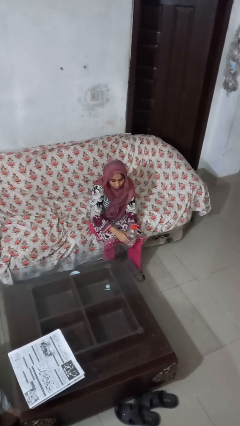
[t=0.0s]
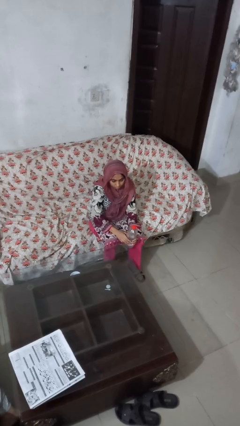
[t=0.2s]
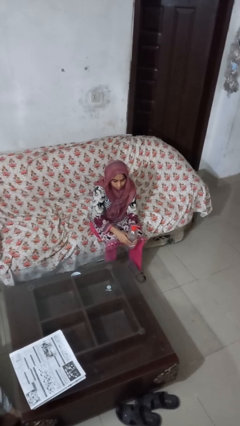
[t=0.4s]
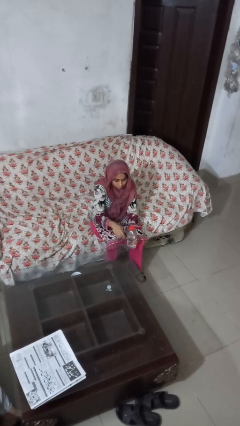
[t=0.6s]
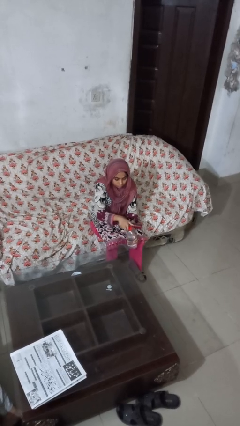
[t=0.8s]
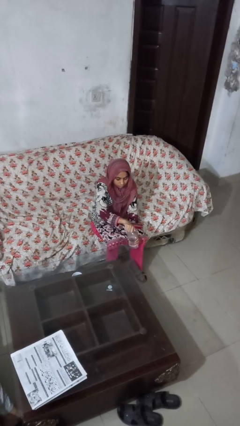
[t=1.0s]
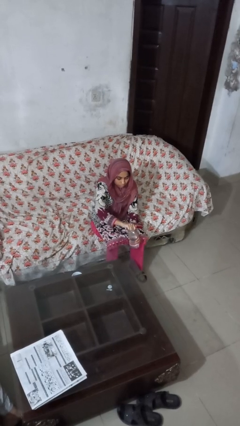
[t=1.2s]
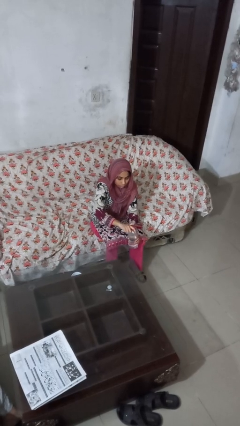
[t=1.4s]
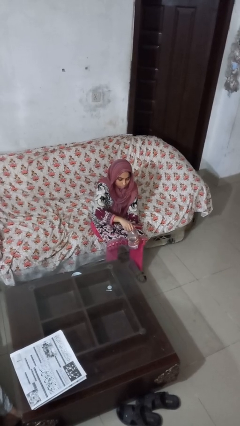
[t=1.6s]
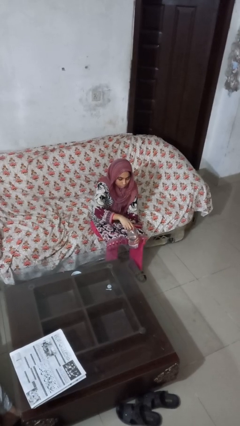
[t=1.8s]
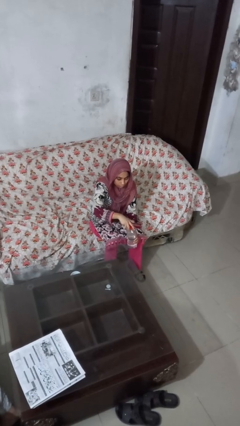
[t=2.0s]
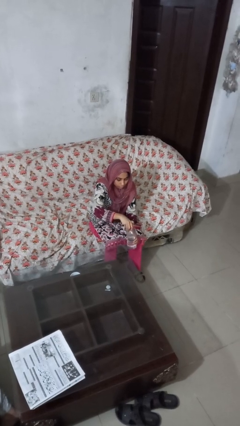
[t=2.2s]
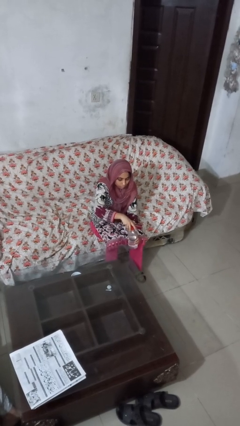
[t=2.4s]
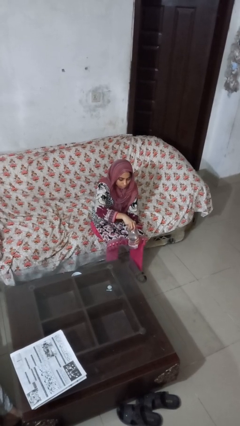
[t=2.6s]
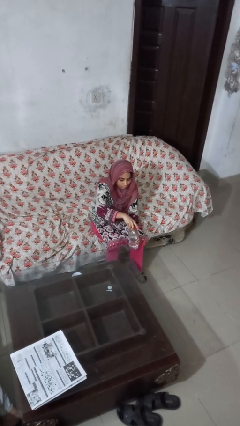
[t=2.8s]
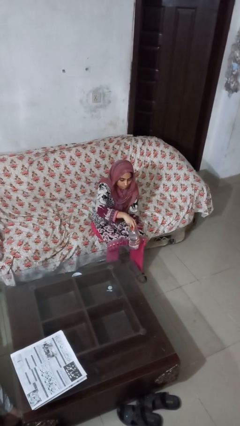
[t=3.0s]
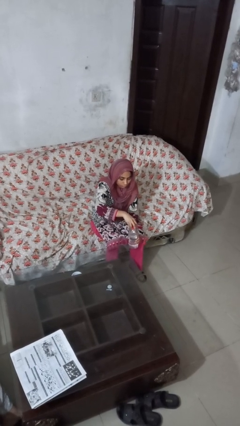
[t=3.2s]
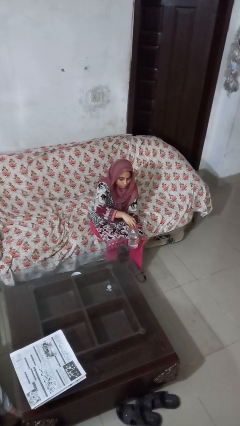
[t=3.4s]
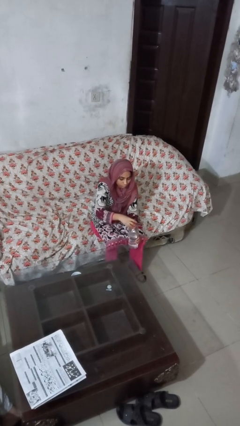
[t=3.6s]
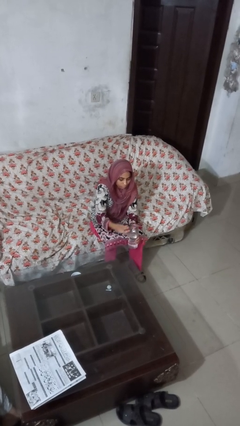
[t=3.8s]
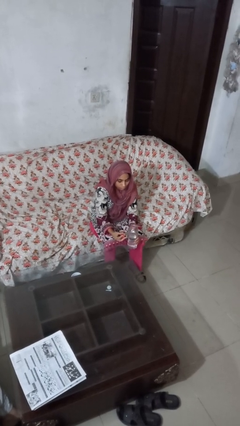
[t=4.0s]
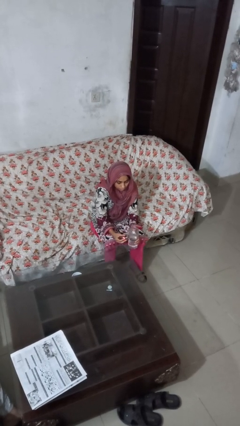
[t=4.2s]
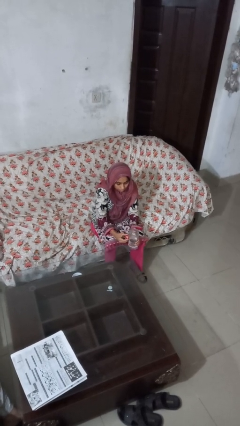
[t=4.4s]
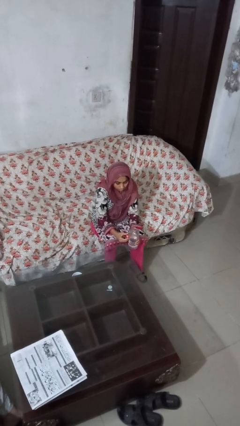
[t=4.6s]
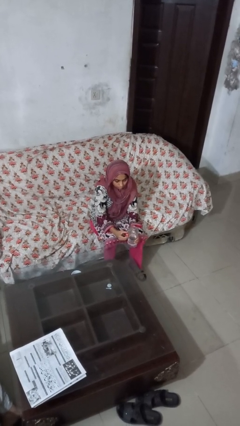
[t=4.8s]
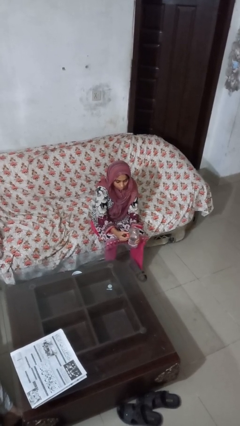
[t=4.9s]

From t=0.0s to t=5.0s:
person unscrews lid from bottle

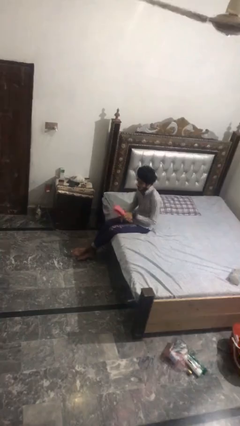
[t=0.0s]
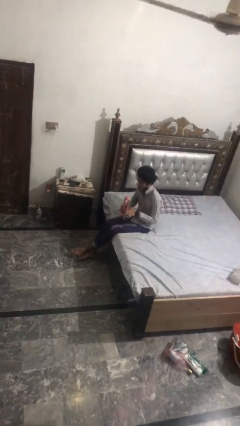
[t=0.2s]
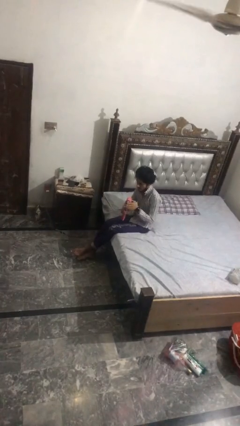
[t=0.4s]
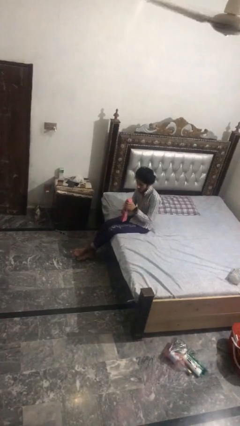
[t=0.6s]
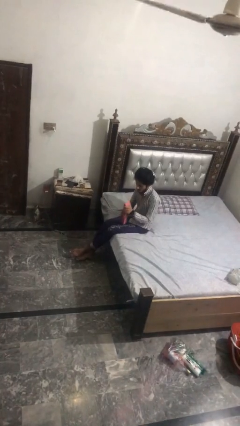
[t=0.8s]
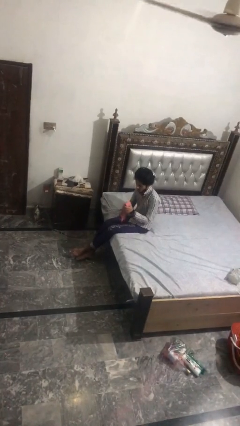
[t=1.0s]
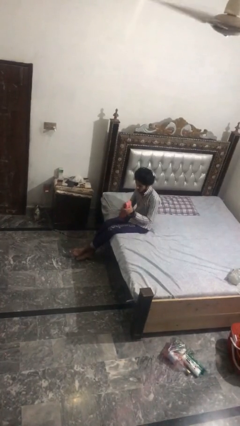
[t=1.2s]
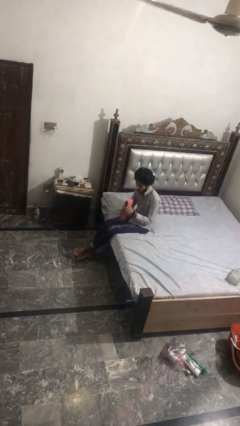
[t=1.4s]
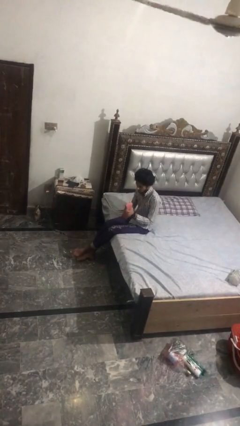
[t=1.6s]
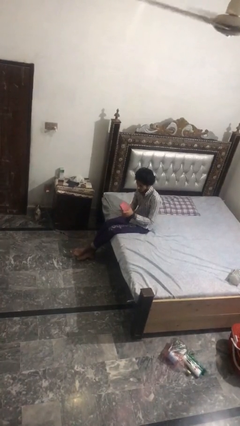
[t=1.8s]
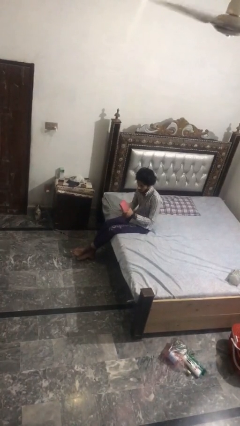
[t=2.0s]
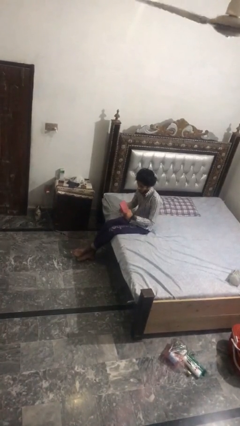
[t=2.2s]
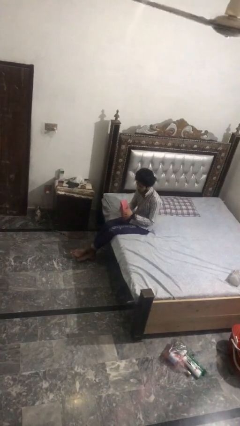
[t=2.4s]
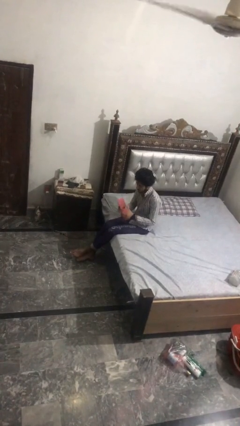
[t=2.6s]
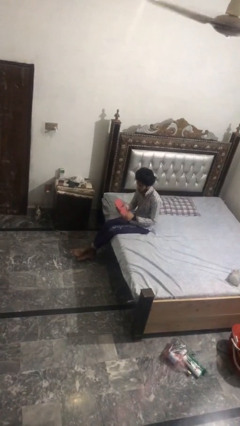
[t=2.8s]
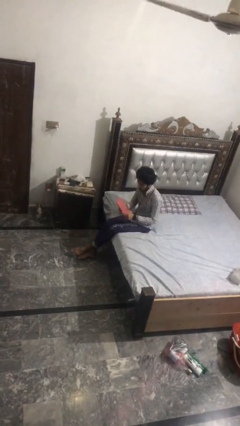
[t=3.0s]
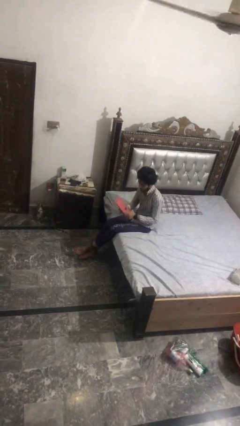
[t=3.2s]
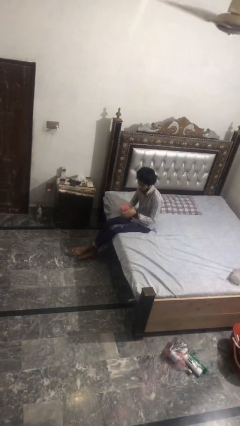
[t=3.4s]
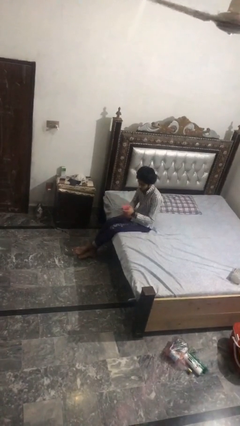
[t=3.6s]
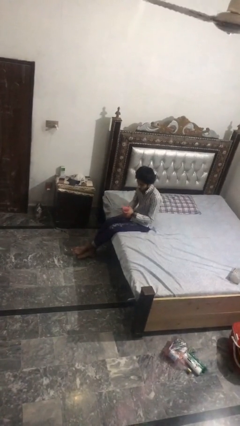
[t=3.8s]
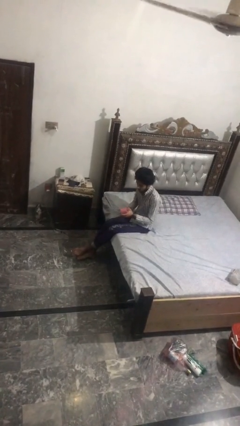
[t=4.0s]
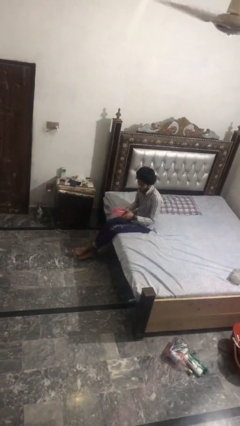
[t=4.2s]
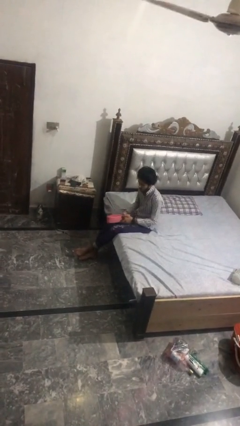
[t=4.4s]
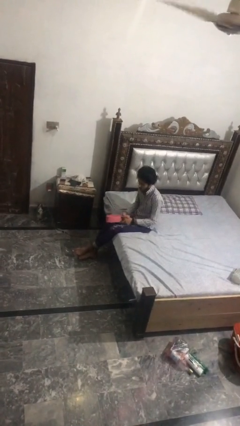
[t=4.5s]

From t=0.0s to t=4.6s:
person squeezes object

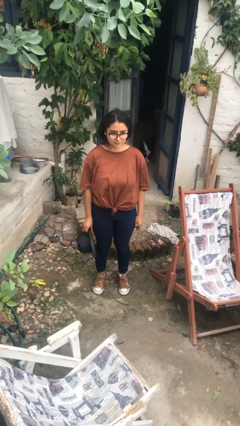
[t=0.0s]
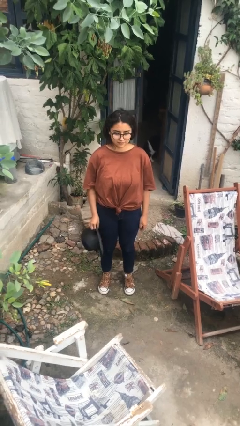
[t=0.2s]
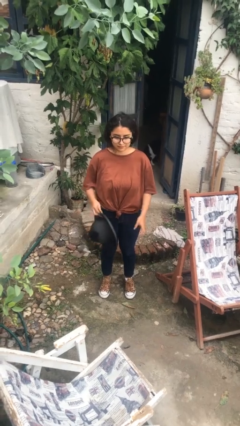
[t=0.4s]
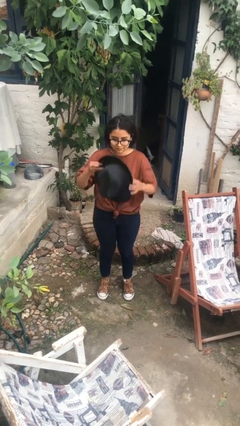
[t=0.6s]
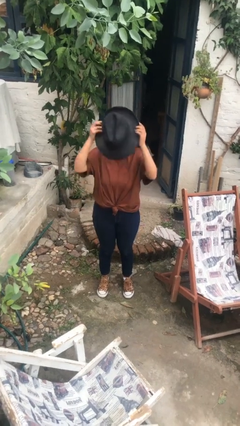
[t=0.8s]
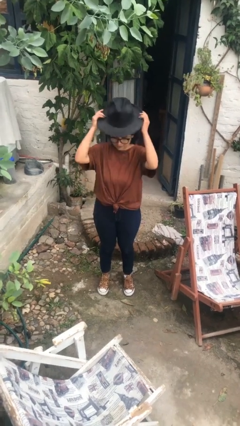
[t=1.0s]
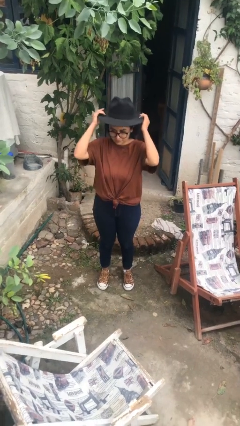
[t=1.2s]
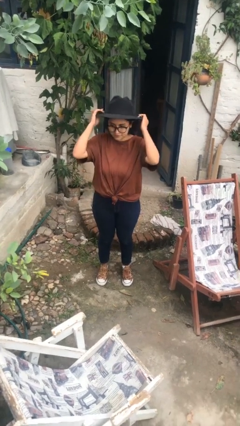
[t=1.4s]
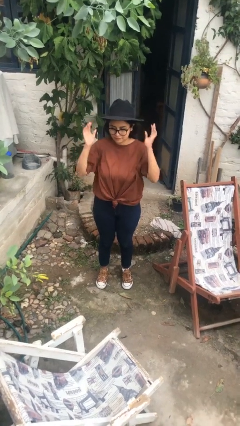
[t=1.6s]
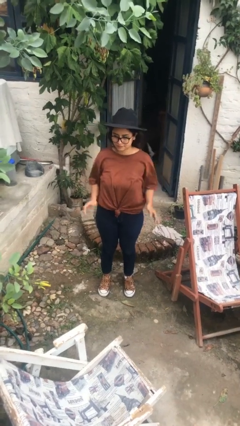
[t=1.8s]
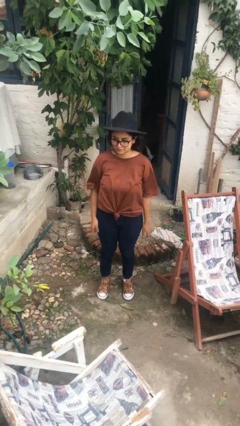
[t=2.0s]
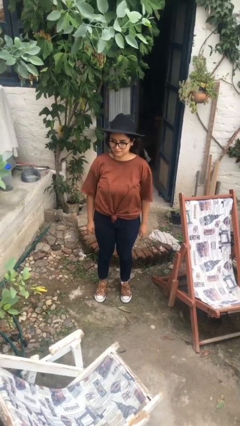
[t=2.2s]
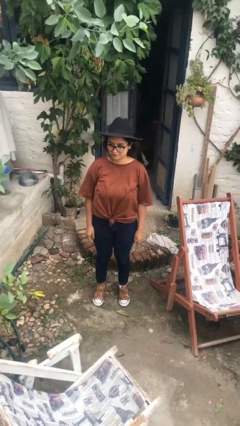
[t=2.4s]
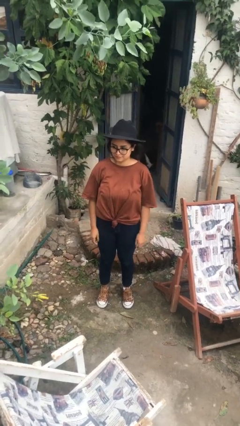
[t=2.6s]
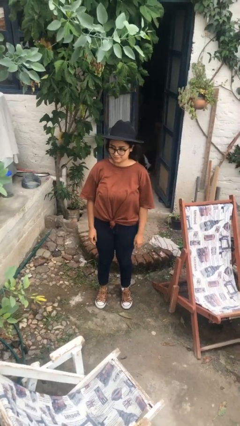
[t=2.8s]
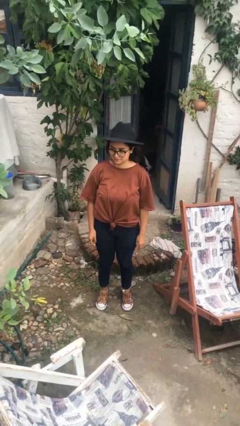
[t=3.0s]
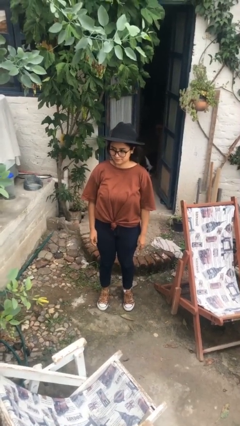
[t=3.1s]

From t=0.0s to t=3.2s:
person puts on hat

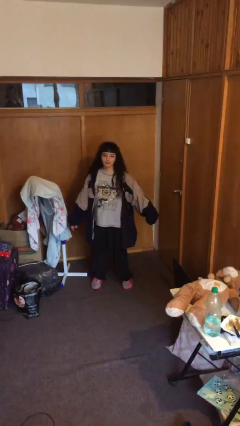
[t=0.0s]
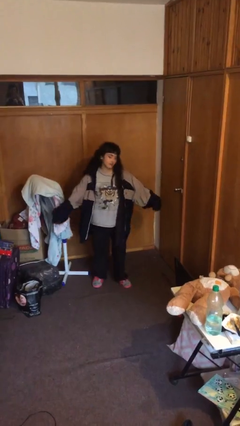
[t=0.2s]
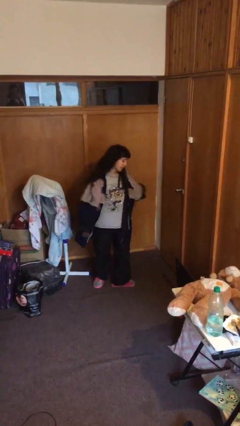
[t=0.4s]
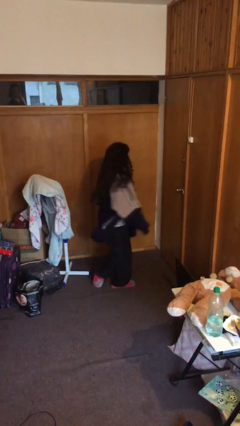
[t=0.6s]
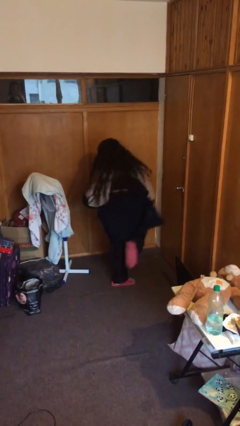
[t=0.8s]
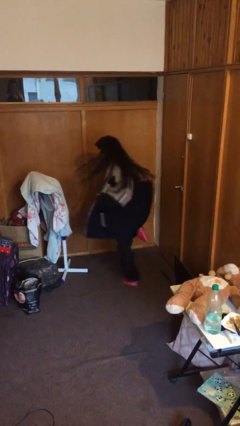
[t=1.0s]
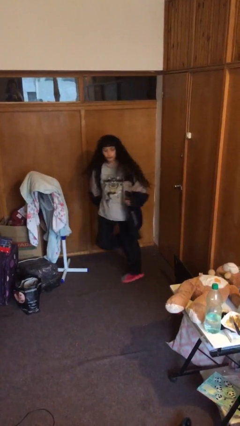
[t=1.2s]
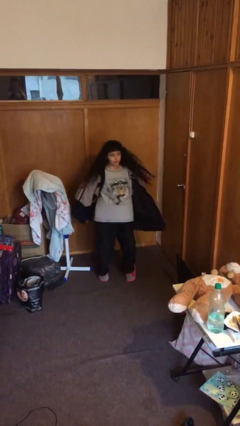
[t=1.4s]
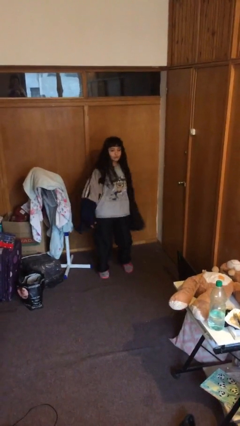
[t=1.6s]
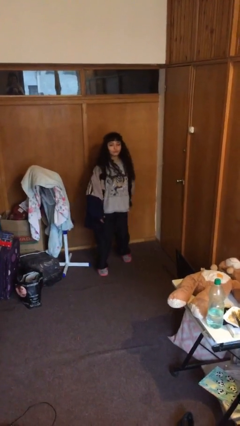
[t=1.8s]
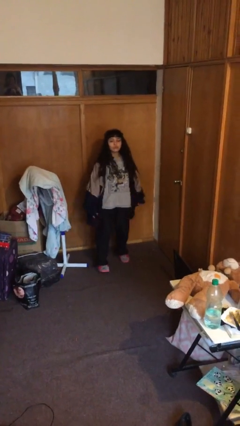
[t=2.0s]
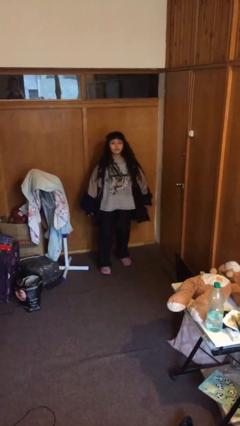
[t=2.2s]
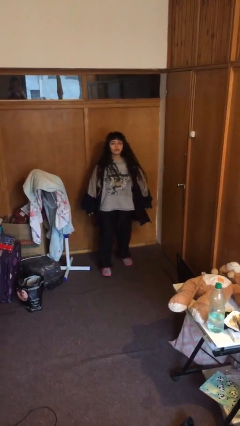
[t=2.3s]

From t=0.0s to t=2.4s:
person twirls

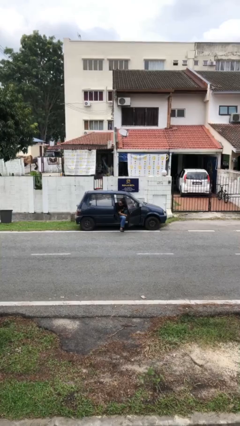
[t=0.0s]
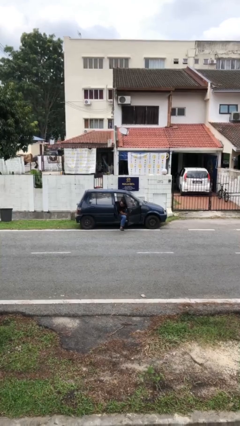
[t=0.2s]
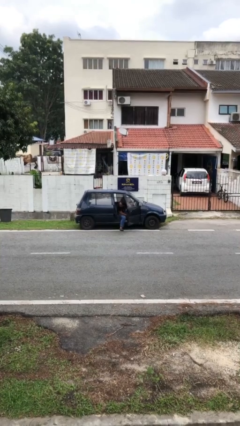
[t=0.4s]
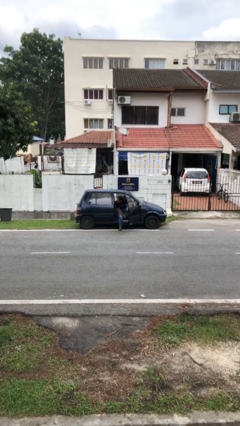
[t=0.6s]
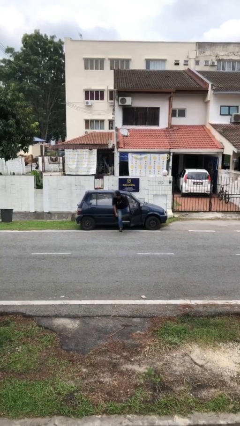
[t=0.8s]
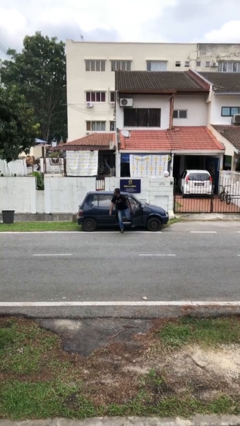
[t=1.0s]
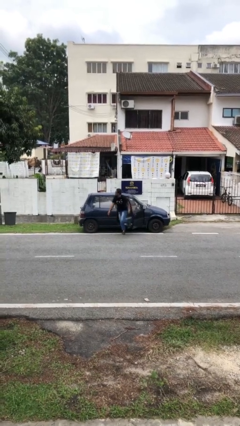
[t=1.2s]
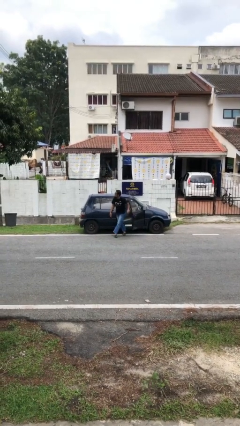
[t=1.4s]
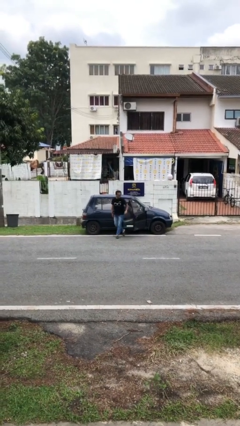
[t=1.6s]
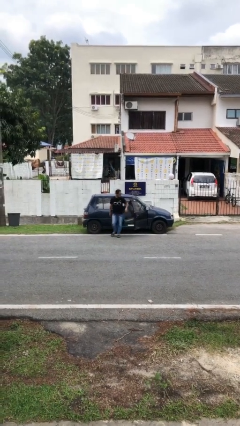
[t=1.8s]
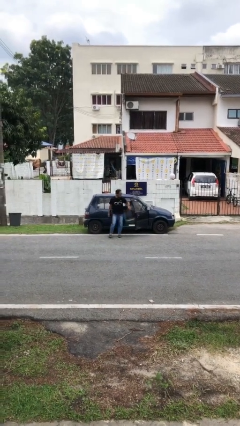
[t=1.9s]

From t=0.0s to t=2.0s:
person exits car
